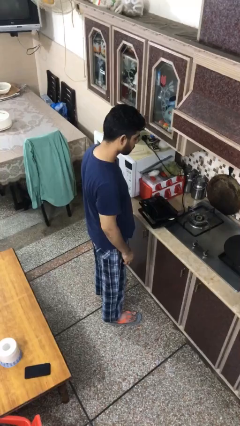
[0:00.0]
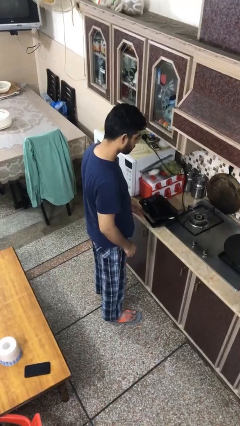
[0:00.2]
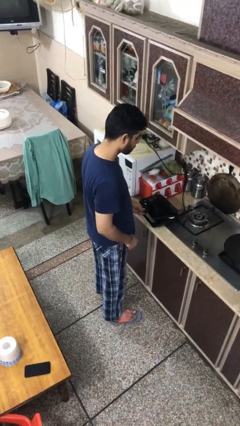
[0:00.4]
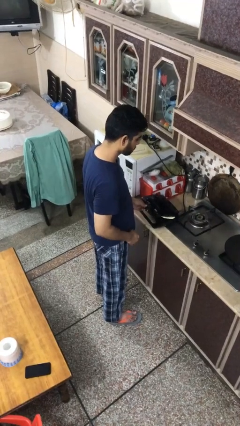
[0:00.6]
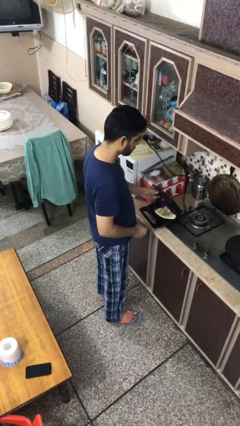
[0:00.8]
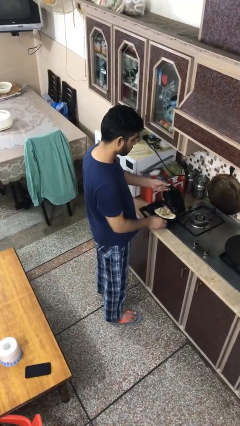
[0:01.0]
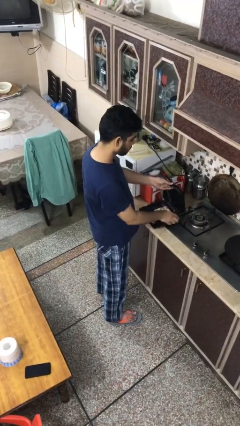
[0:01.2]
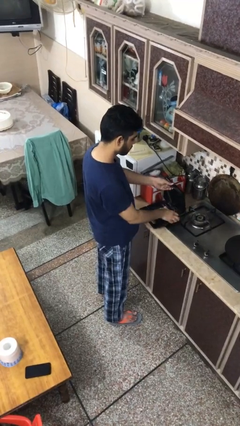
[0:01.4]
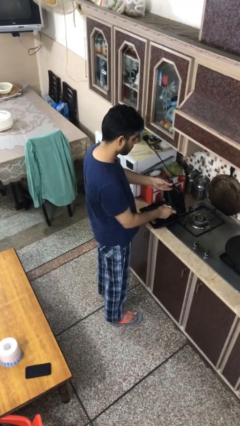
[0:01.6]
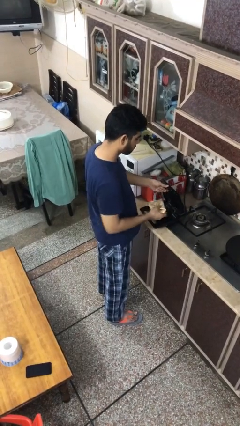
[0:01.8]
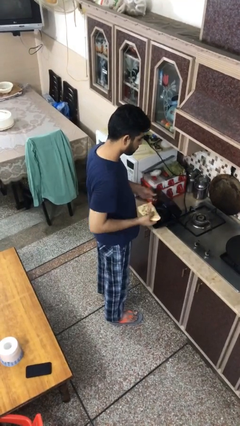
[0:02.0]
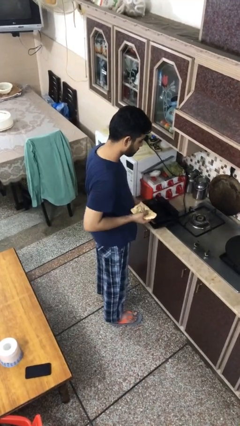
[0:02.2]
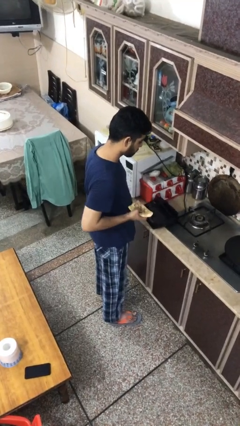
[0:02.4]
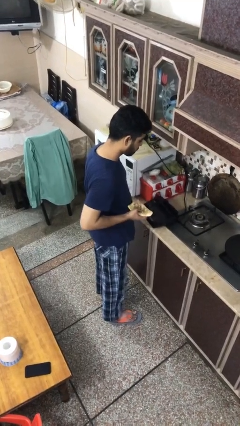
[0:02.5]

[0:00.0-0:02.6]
person takes object from toaster

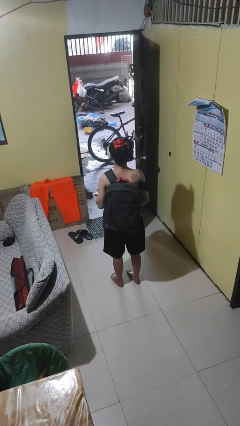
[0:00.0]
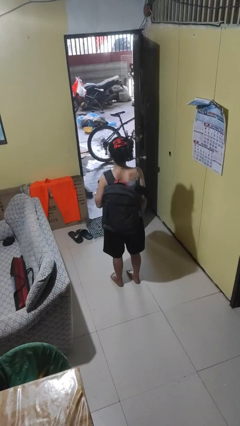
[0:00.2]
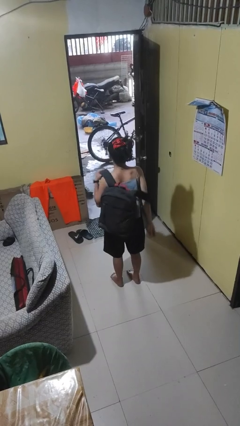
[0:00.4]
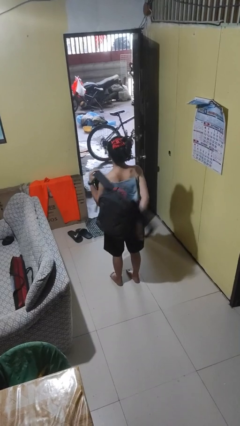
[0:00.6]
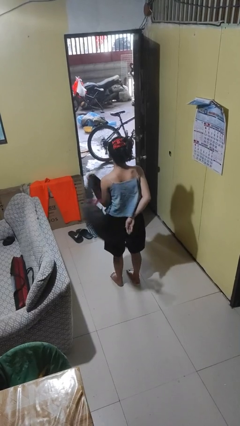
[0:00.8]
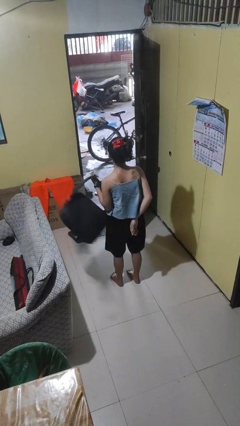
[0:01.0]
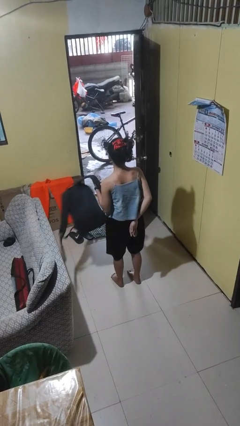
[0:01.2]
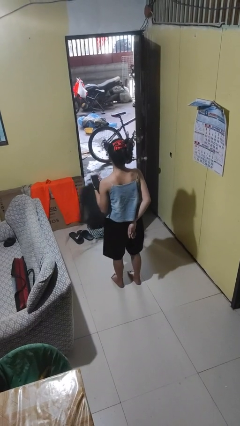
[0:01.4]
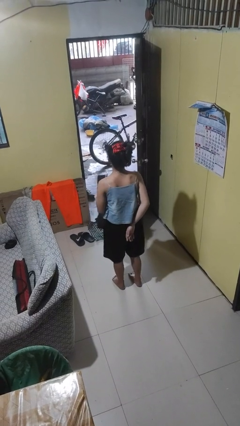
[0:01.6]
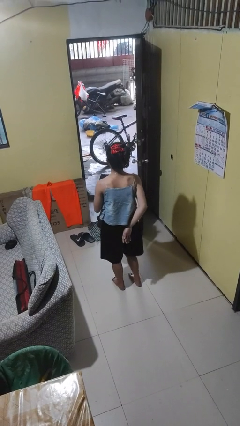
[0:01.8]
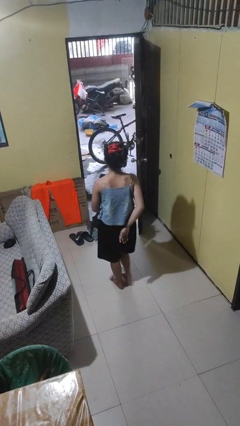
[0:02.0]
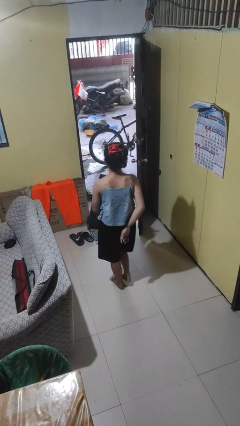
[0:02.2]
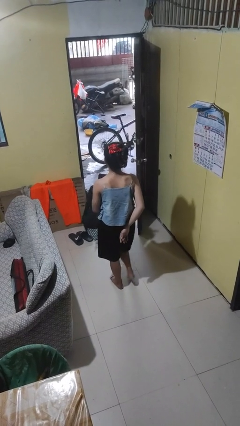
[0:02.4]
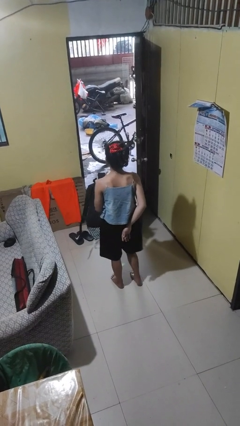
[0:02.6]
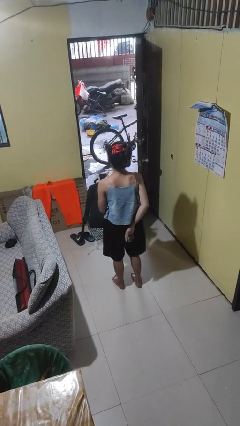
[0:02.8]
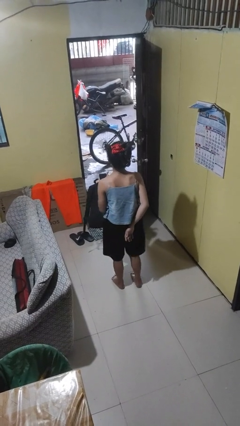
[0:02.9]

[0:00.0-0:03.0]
person takes off backpack

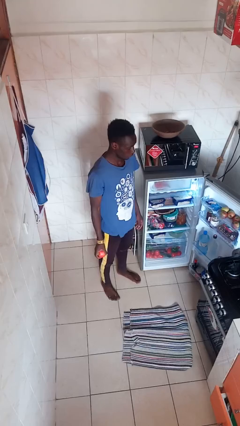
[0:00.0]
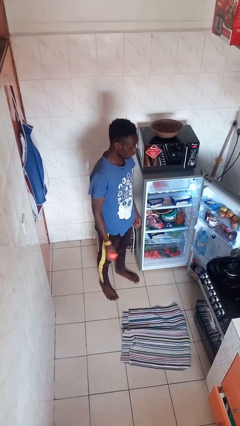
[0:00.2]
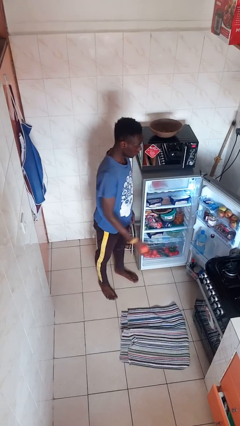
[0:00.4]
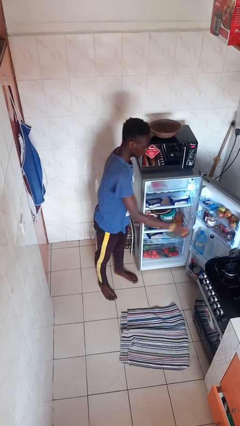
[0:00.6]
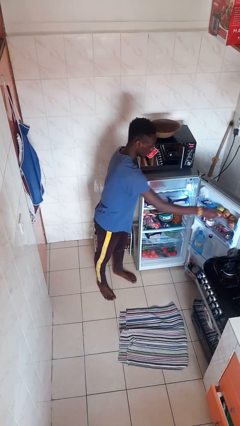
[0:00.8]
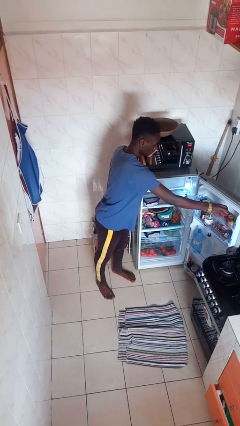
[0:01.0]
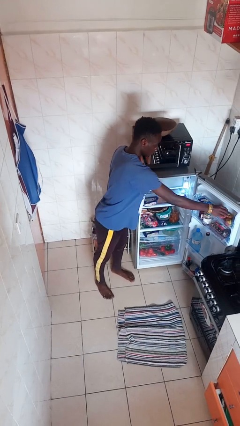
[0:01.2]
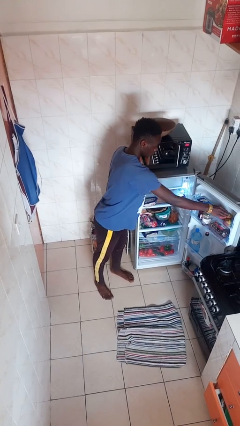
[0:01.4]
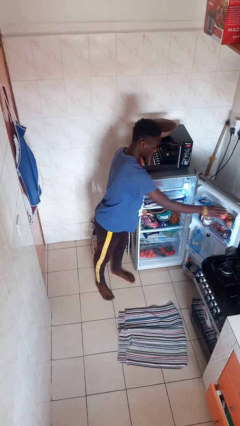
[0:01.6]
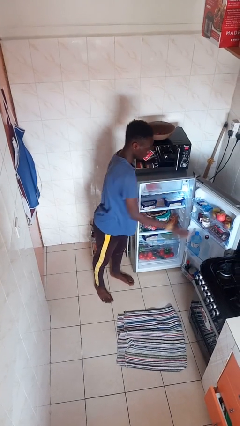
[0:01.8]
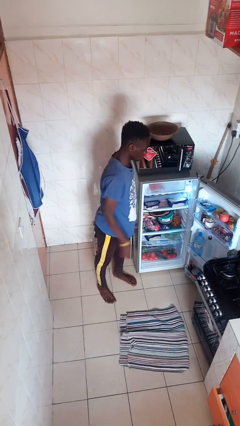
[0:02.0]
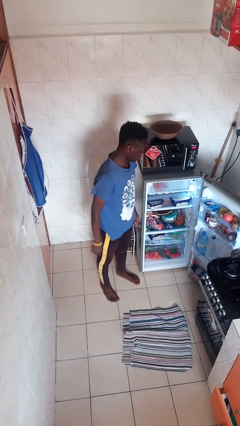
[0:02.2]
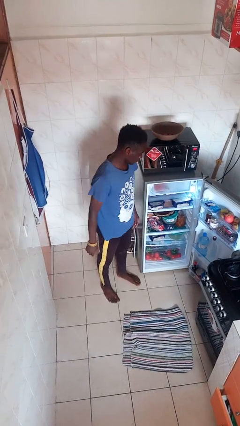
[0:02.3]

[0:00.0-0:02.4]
person puts object into refrigerator

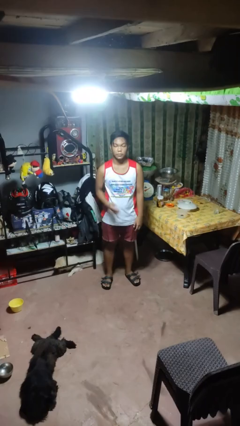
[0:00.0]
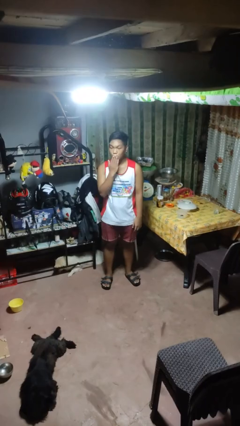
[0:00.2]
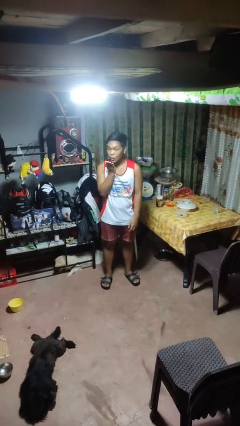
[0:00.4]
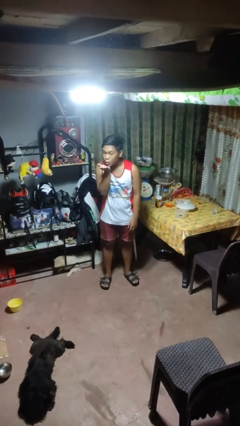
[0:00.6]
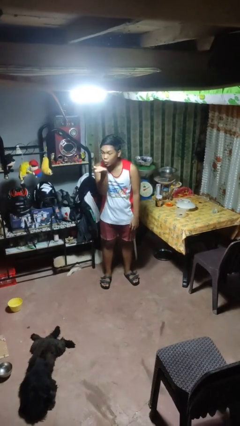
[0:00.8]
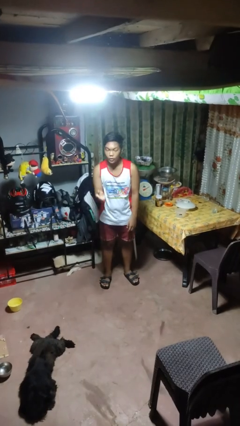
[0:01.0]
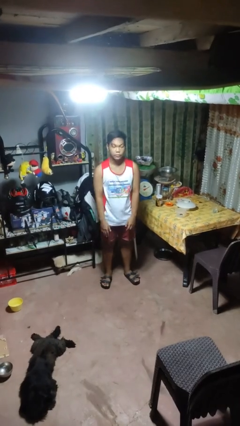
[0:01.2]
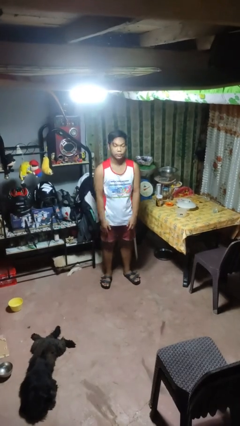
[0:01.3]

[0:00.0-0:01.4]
person gestures blow kiss

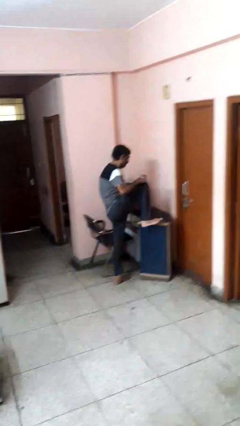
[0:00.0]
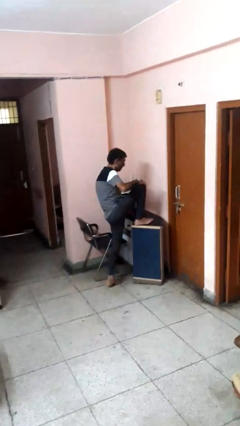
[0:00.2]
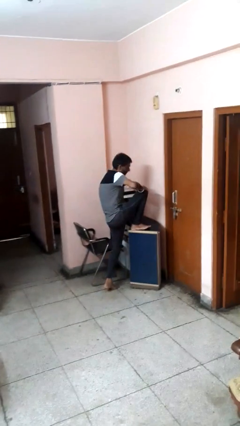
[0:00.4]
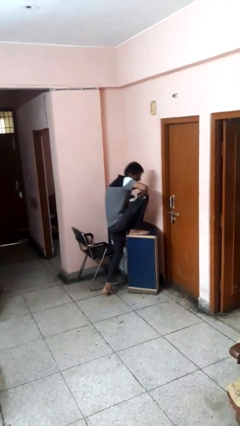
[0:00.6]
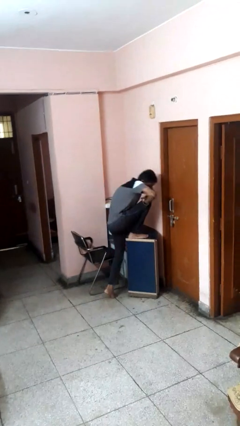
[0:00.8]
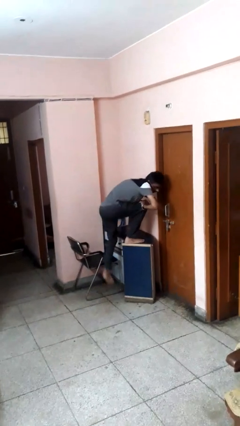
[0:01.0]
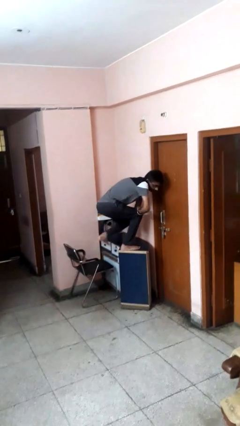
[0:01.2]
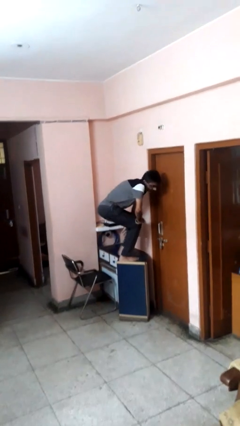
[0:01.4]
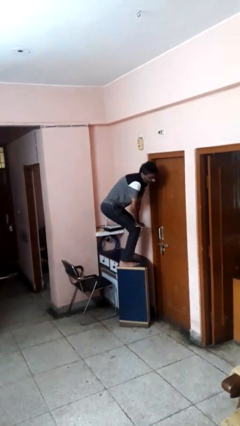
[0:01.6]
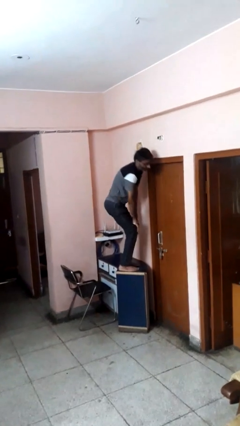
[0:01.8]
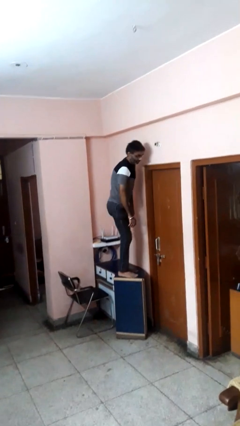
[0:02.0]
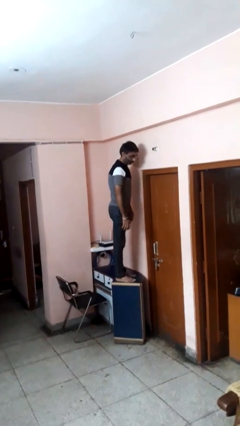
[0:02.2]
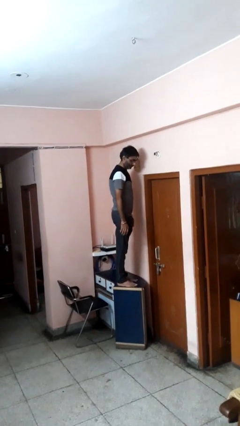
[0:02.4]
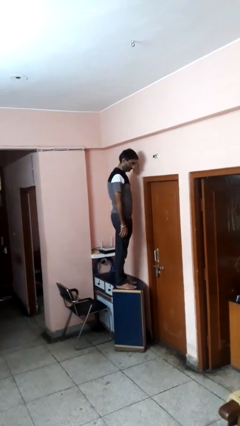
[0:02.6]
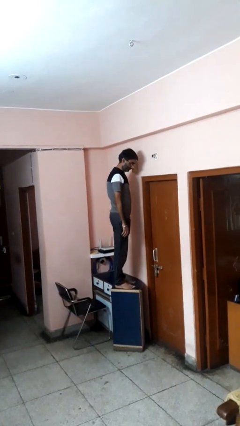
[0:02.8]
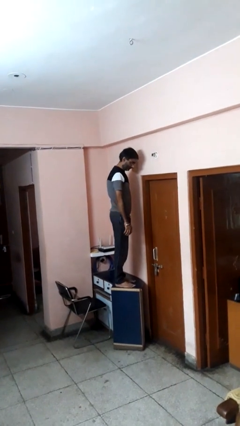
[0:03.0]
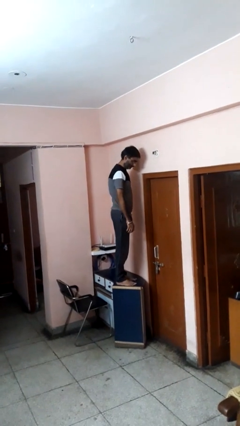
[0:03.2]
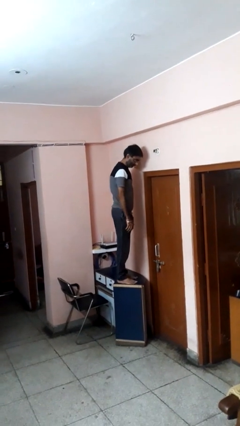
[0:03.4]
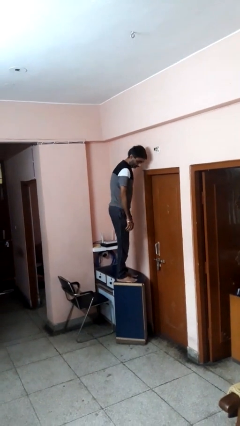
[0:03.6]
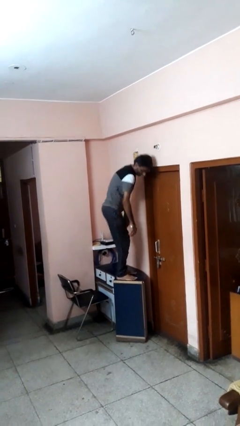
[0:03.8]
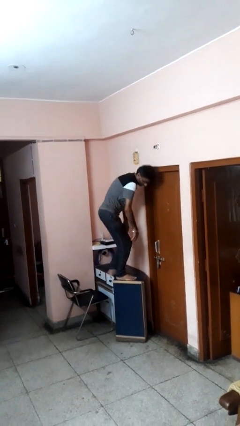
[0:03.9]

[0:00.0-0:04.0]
person climbs on table

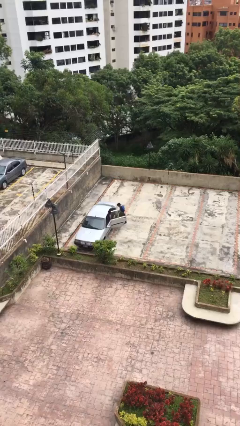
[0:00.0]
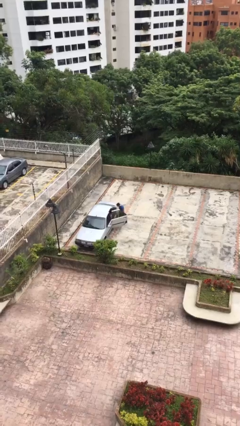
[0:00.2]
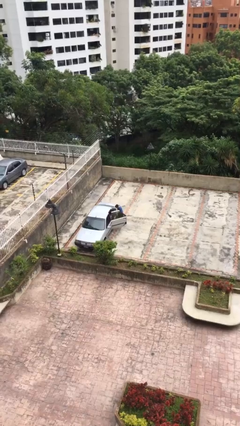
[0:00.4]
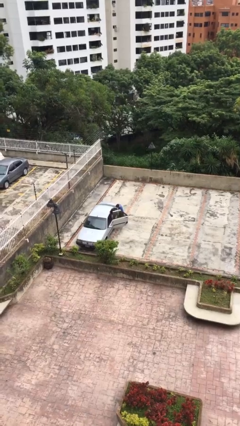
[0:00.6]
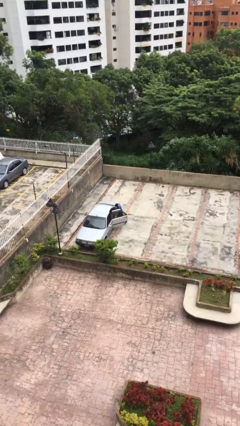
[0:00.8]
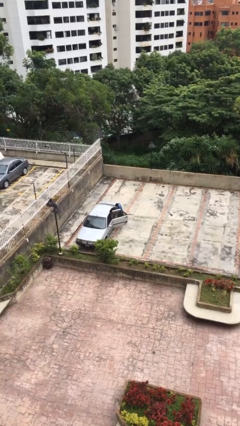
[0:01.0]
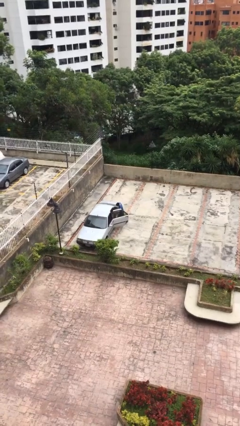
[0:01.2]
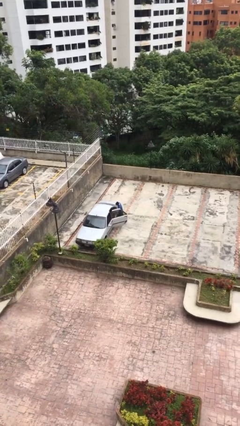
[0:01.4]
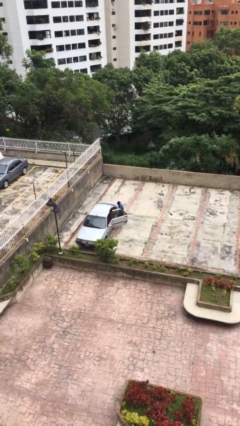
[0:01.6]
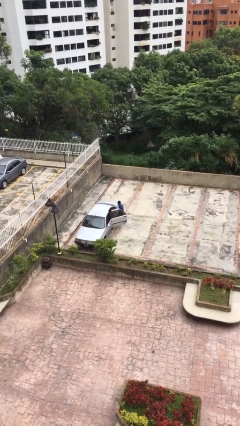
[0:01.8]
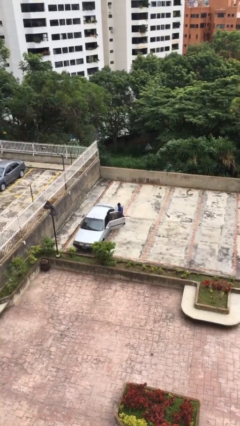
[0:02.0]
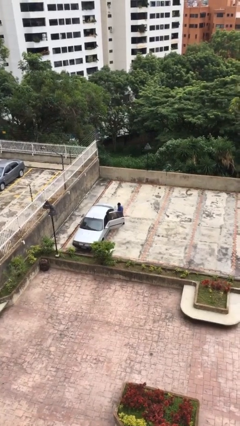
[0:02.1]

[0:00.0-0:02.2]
person unloads car

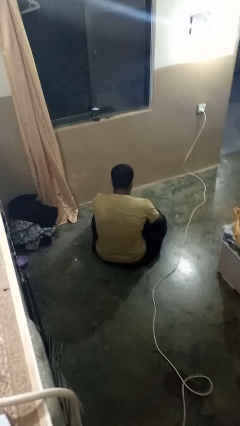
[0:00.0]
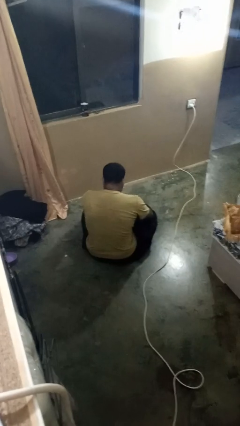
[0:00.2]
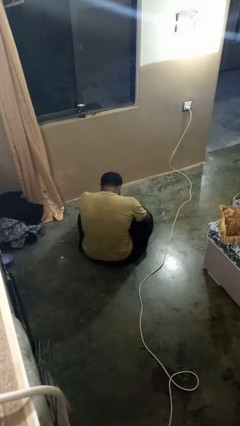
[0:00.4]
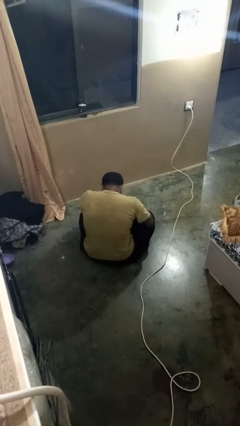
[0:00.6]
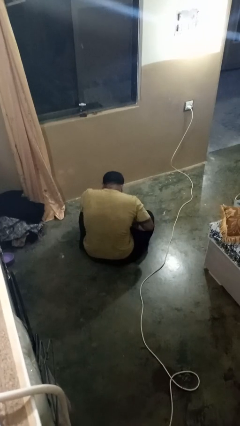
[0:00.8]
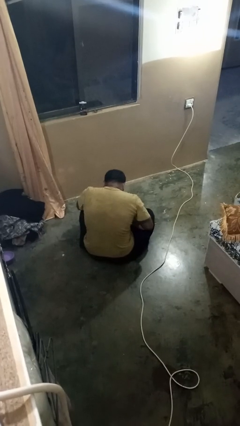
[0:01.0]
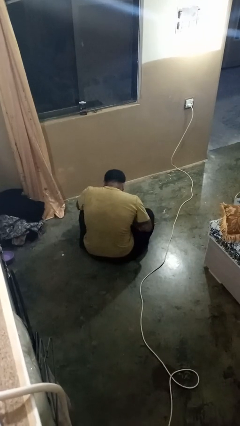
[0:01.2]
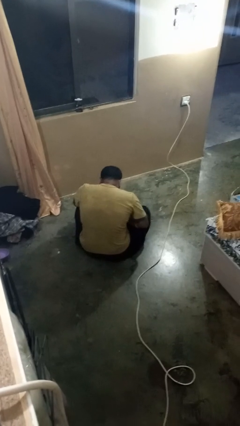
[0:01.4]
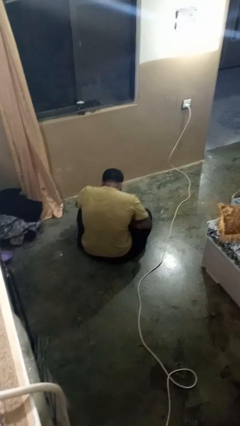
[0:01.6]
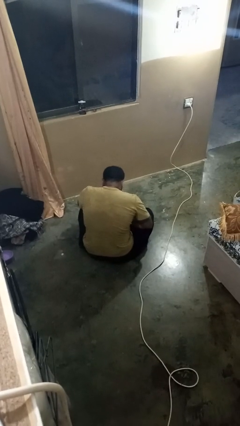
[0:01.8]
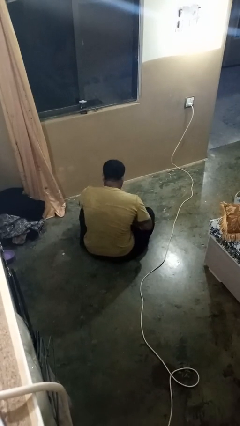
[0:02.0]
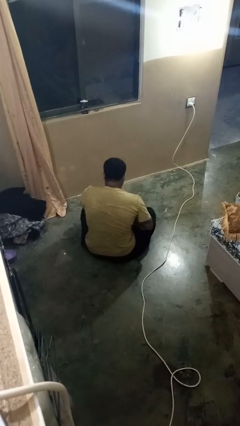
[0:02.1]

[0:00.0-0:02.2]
person looks at hands in lap
